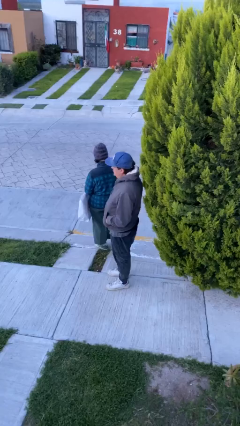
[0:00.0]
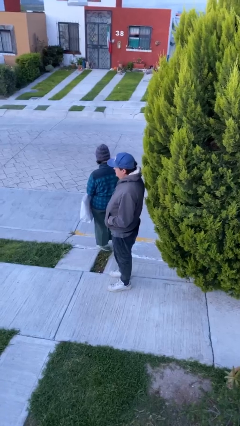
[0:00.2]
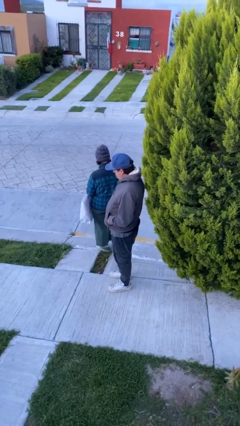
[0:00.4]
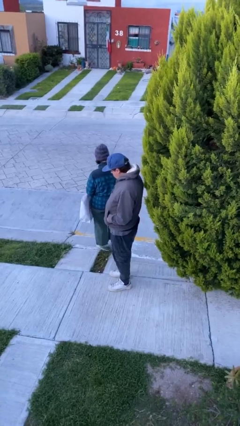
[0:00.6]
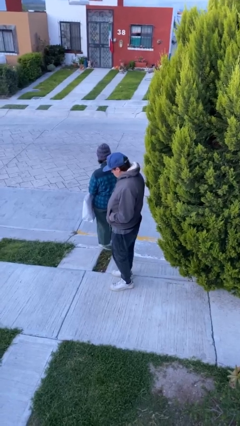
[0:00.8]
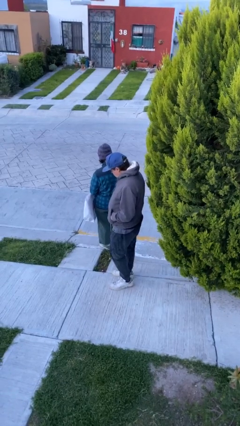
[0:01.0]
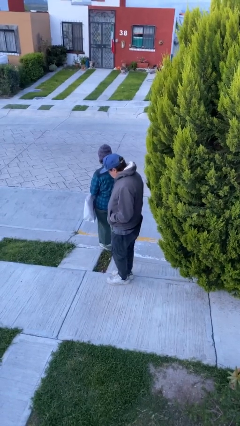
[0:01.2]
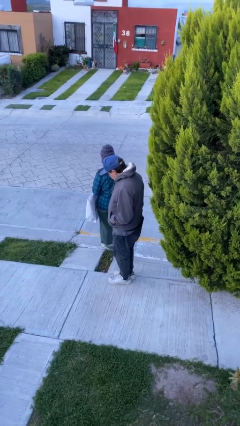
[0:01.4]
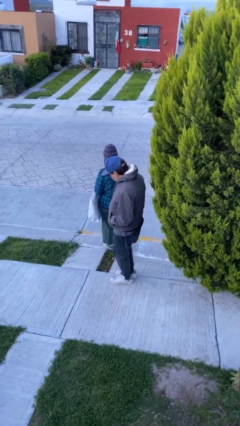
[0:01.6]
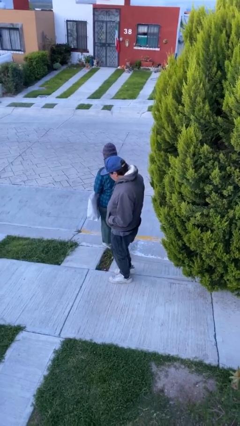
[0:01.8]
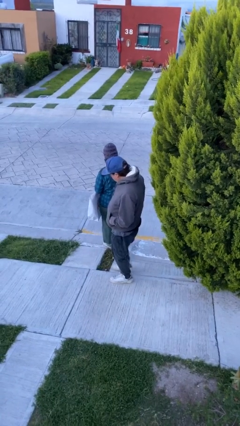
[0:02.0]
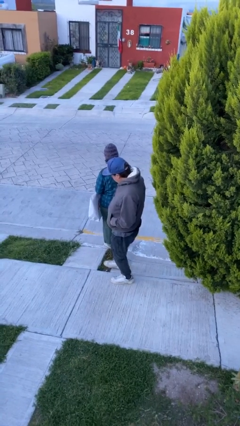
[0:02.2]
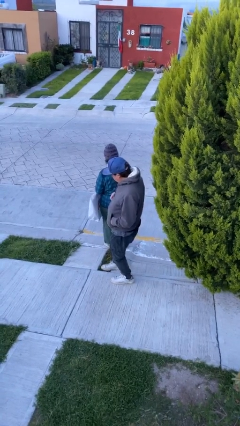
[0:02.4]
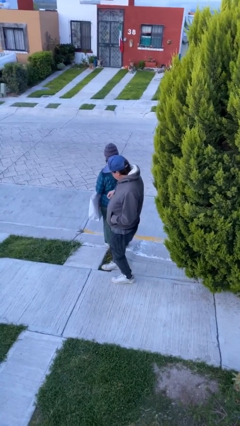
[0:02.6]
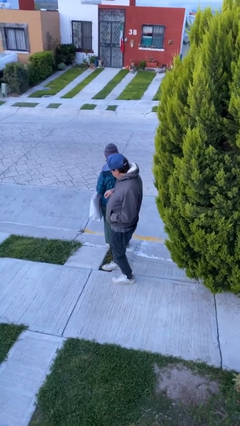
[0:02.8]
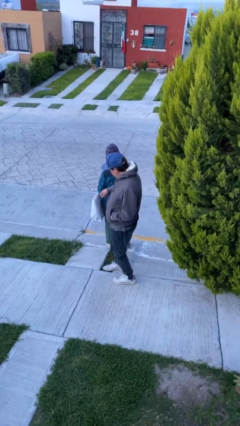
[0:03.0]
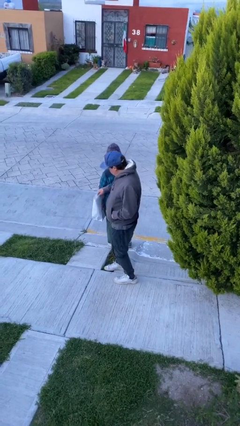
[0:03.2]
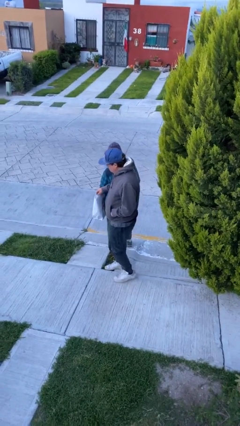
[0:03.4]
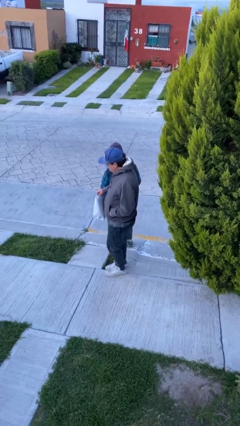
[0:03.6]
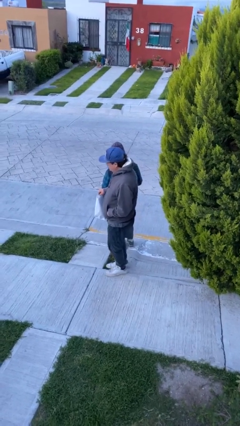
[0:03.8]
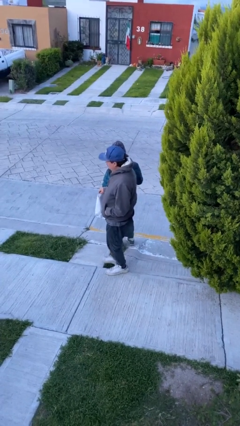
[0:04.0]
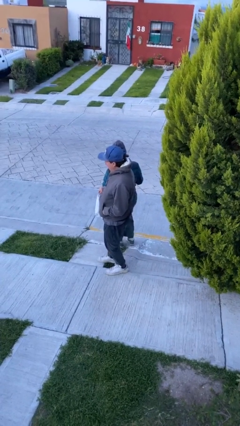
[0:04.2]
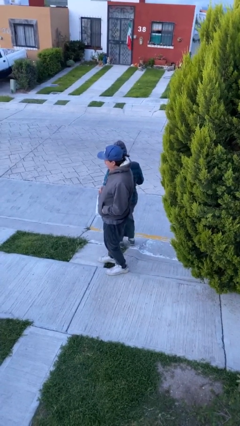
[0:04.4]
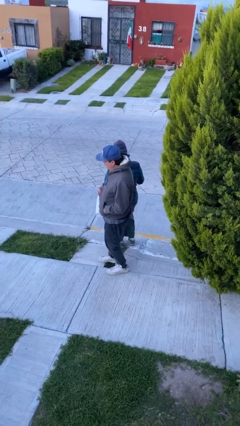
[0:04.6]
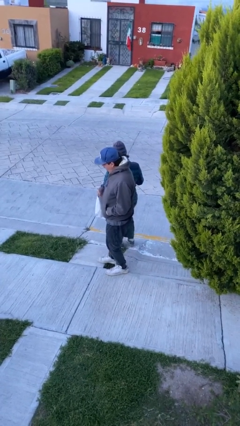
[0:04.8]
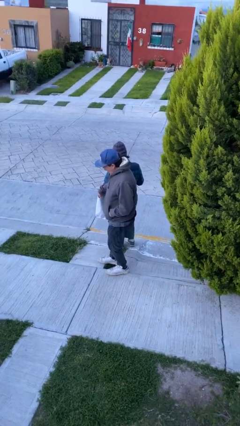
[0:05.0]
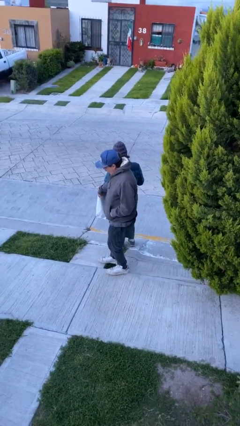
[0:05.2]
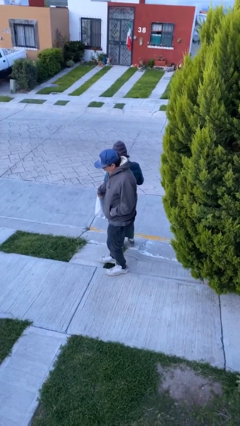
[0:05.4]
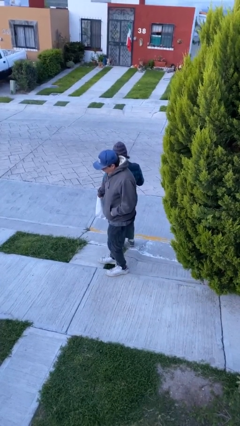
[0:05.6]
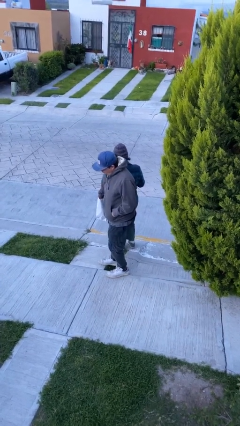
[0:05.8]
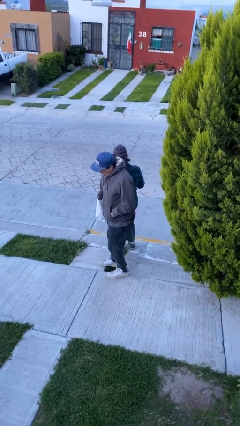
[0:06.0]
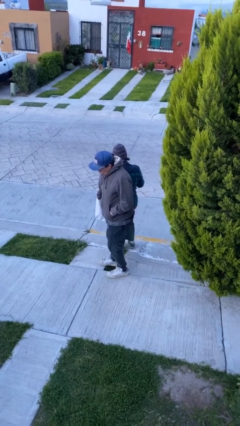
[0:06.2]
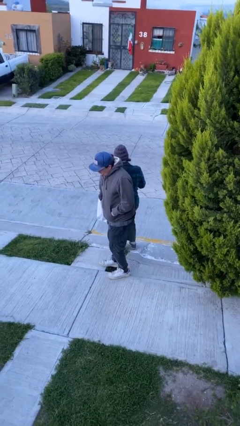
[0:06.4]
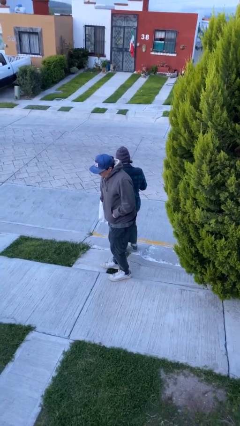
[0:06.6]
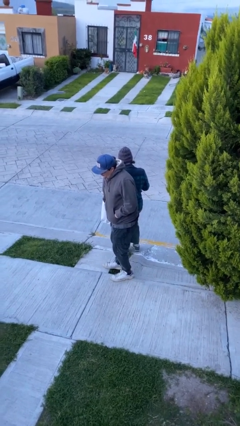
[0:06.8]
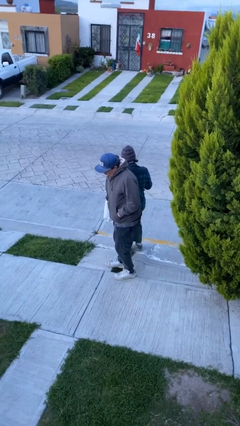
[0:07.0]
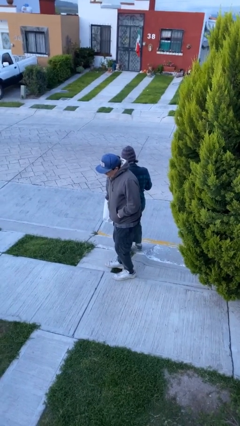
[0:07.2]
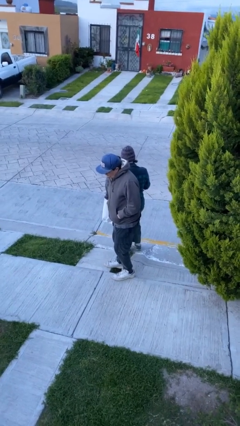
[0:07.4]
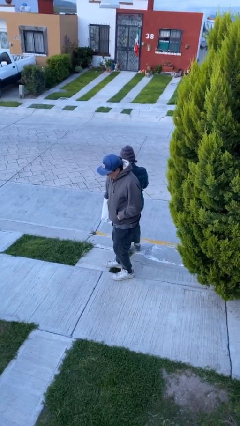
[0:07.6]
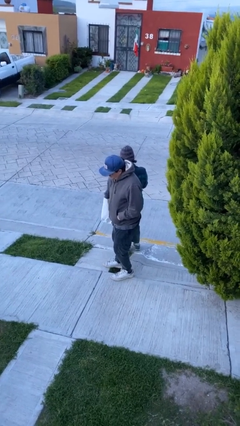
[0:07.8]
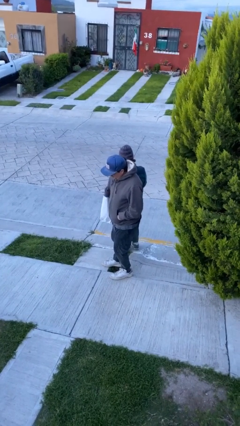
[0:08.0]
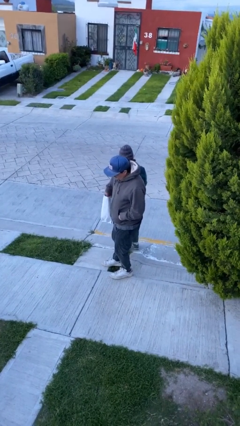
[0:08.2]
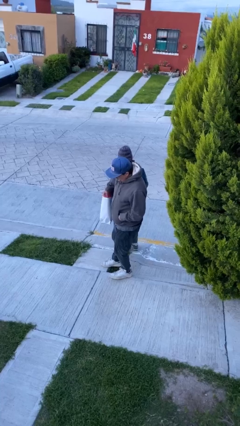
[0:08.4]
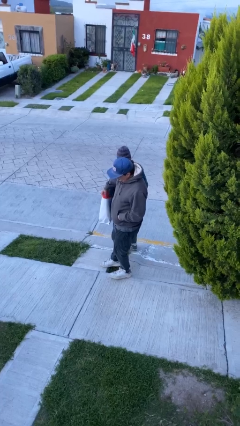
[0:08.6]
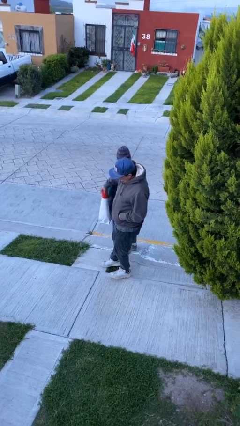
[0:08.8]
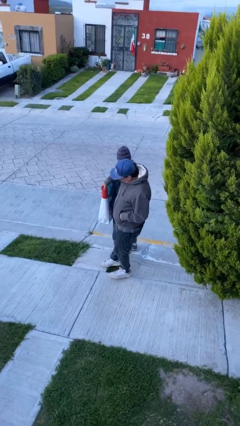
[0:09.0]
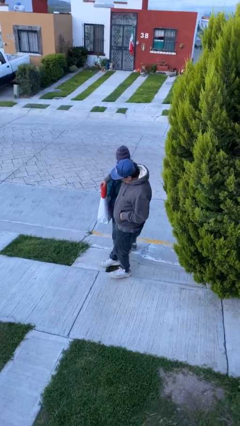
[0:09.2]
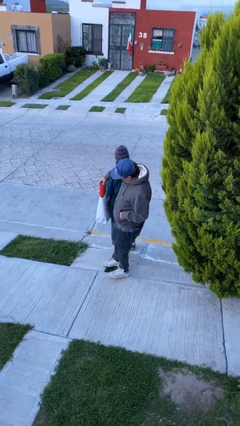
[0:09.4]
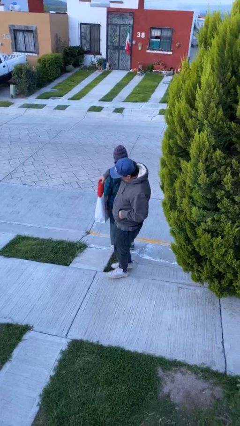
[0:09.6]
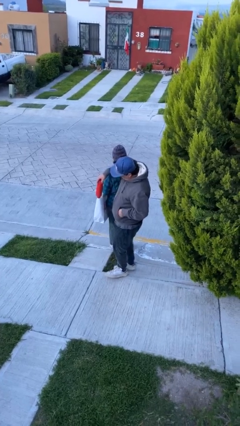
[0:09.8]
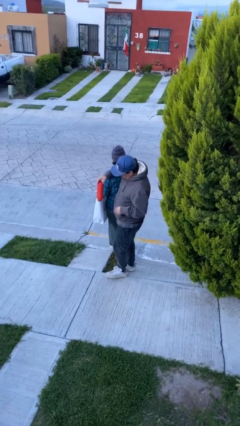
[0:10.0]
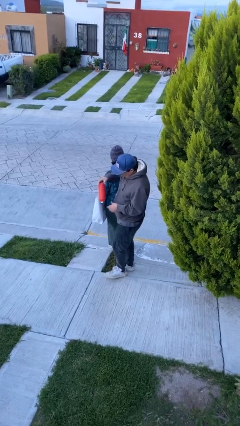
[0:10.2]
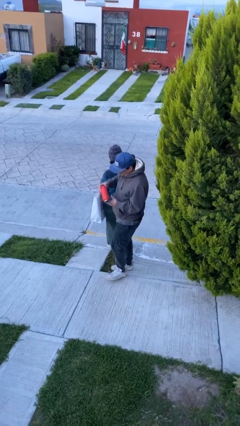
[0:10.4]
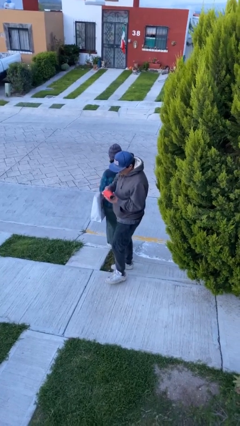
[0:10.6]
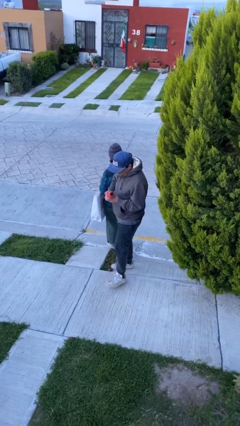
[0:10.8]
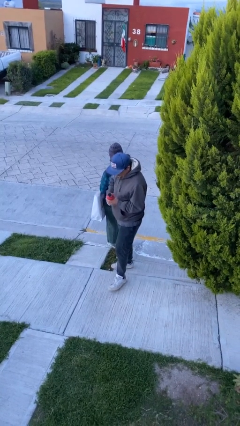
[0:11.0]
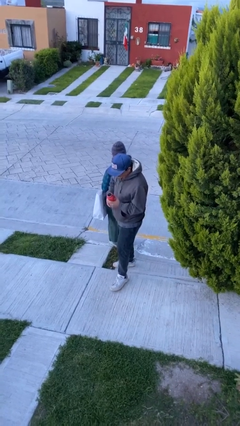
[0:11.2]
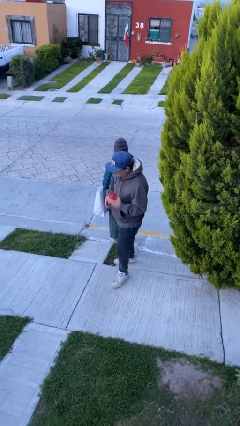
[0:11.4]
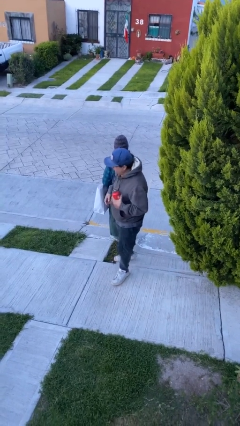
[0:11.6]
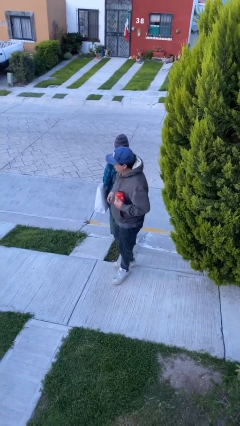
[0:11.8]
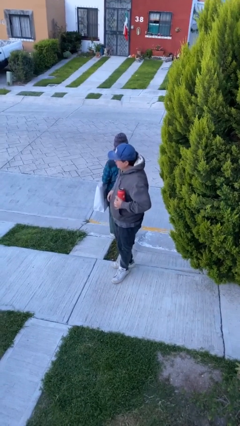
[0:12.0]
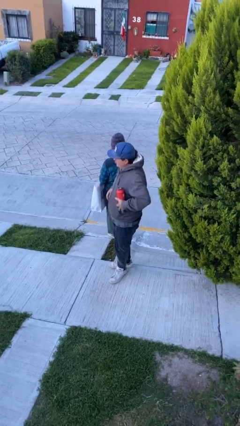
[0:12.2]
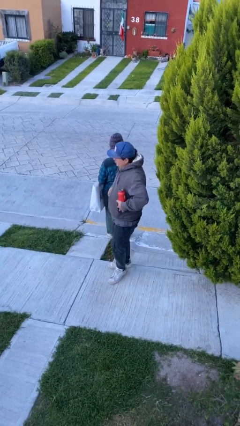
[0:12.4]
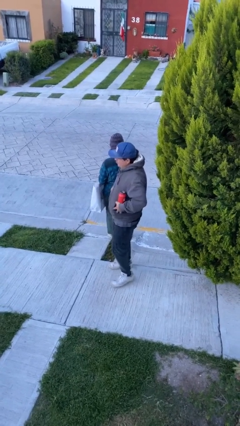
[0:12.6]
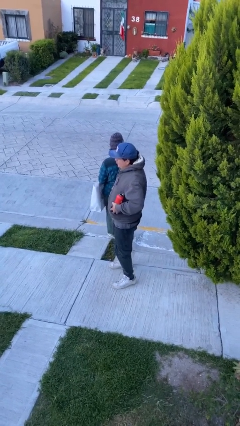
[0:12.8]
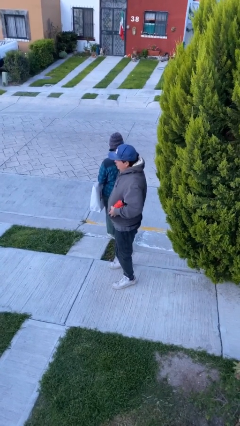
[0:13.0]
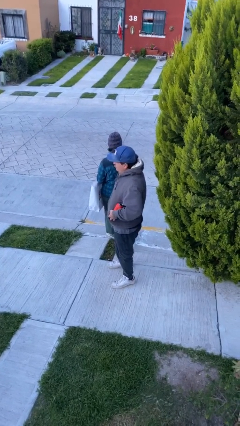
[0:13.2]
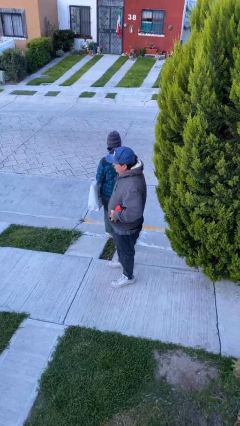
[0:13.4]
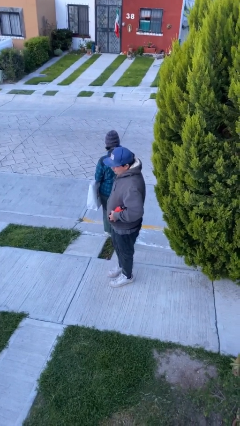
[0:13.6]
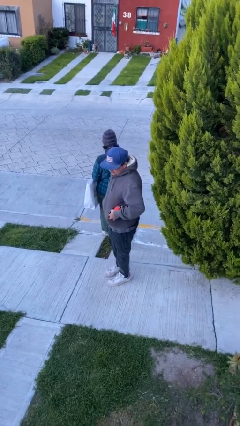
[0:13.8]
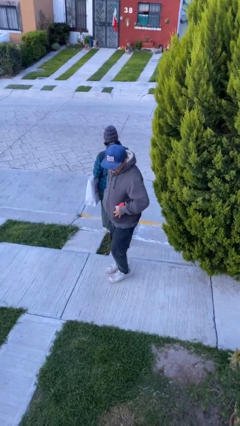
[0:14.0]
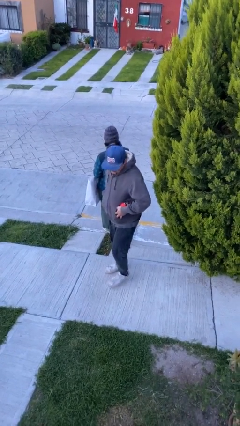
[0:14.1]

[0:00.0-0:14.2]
person steals object from person

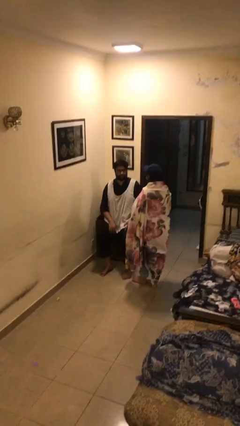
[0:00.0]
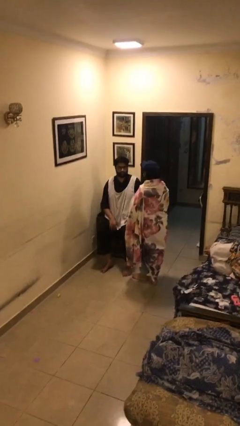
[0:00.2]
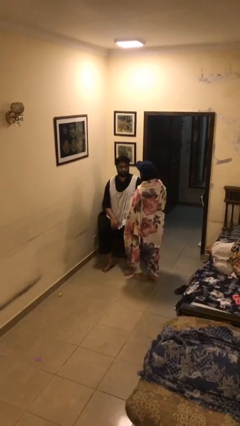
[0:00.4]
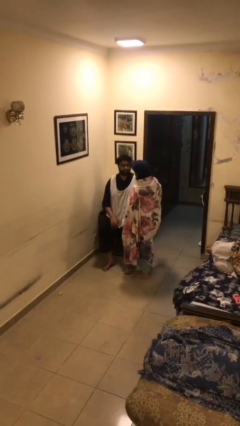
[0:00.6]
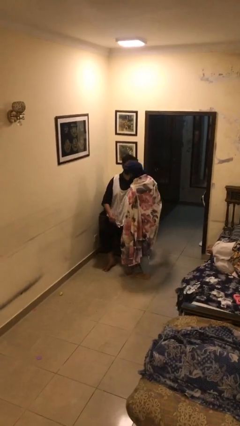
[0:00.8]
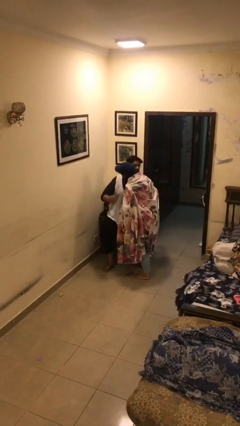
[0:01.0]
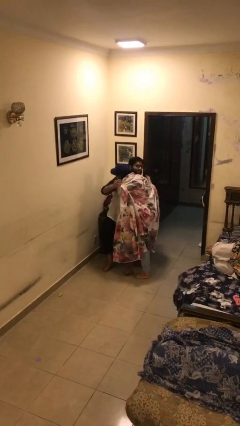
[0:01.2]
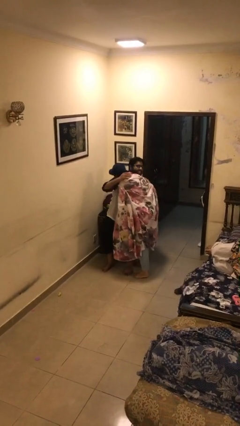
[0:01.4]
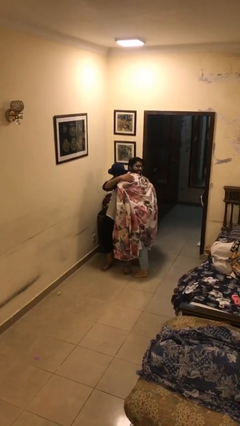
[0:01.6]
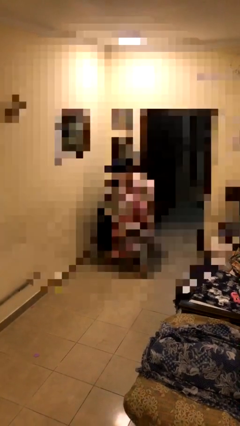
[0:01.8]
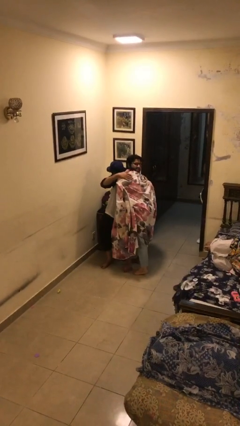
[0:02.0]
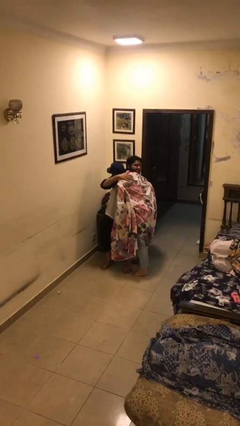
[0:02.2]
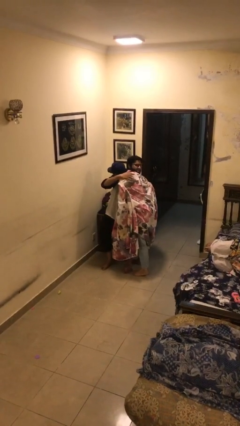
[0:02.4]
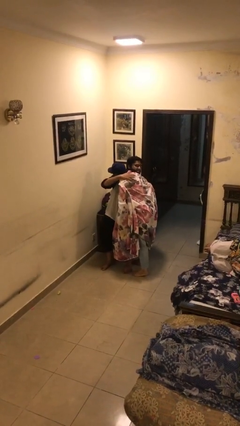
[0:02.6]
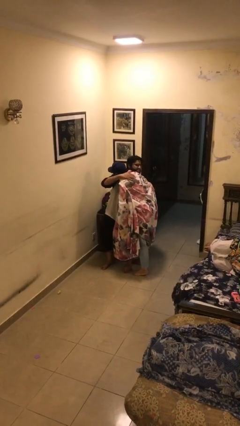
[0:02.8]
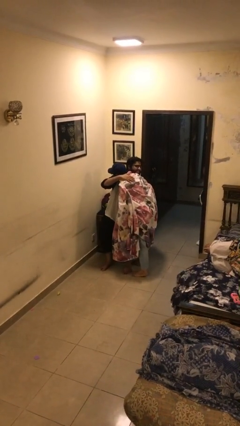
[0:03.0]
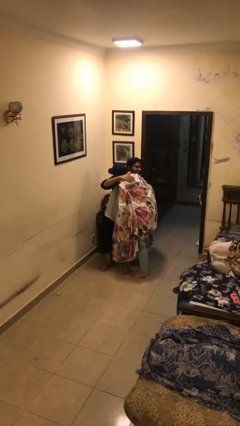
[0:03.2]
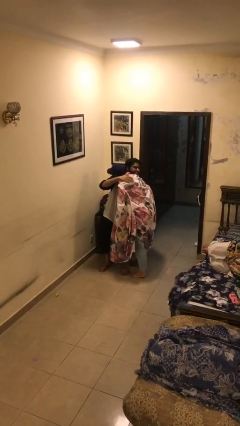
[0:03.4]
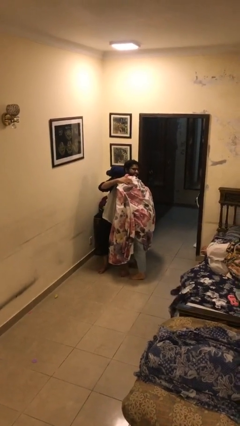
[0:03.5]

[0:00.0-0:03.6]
person embraces person

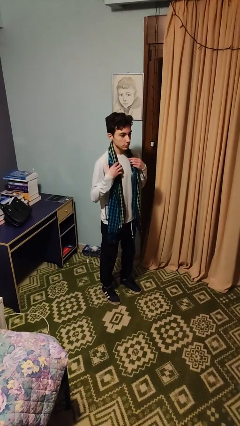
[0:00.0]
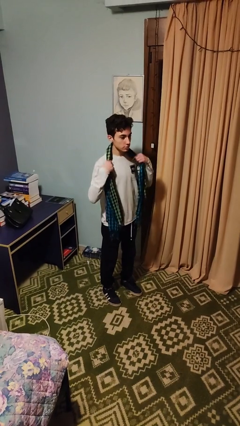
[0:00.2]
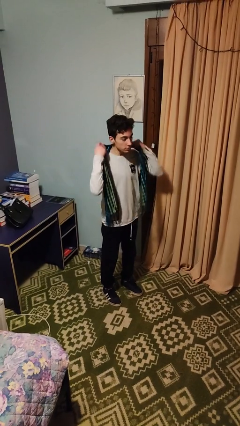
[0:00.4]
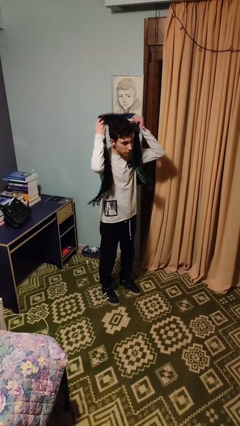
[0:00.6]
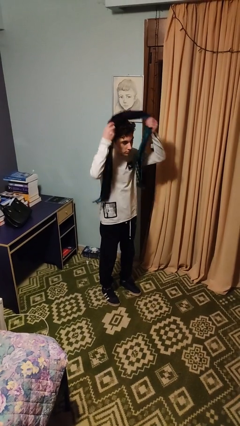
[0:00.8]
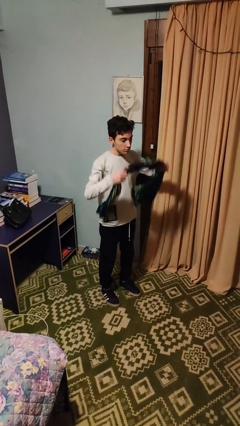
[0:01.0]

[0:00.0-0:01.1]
person takes off scarf
